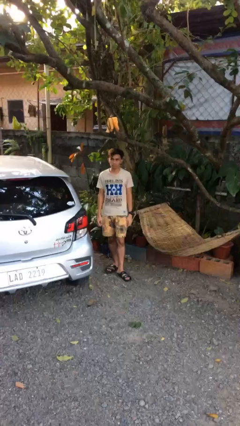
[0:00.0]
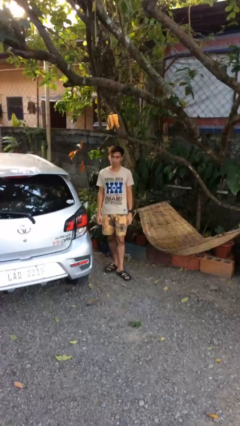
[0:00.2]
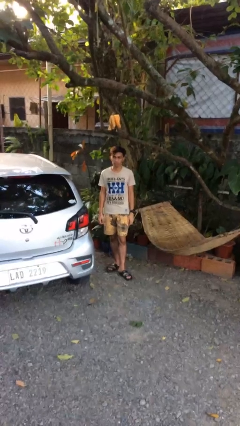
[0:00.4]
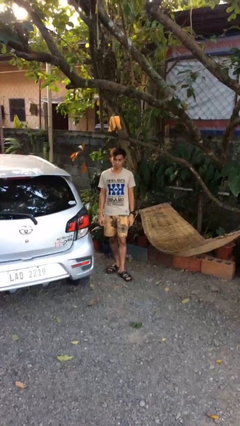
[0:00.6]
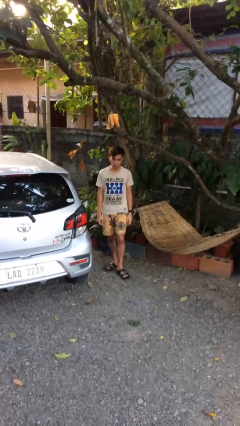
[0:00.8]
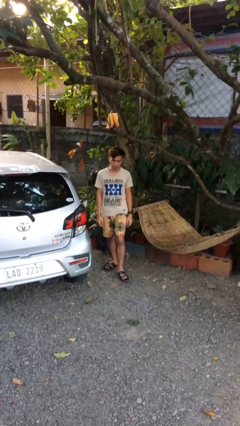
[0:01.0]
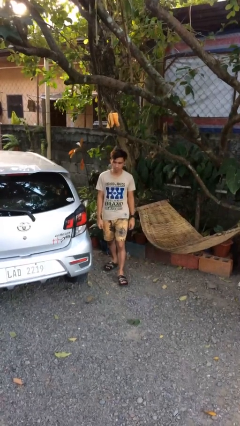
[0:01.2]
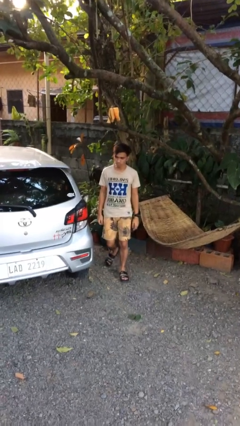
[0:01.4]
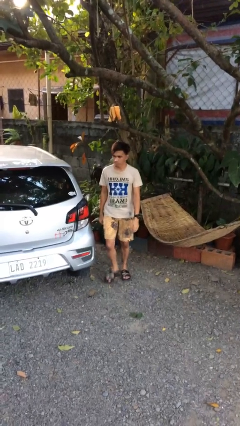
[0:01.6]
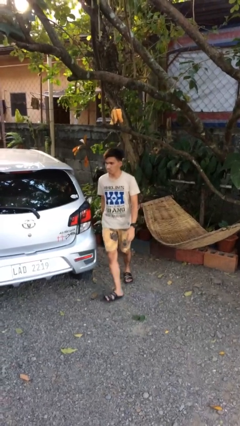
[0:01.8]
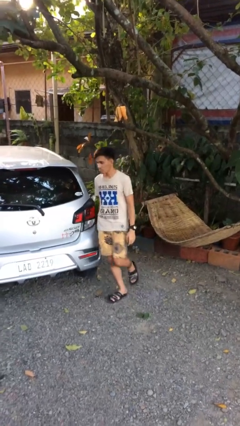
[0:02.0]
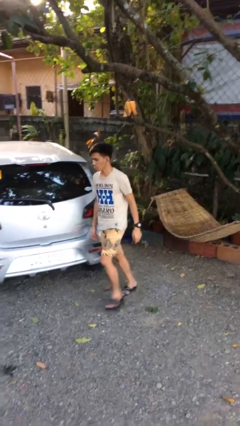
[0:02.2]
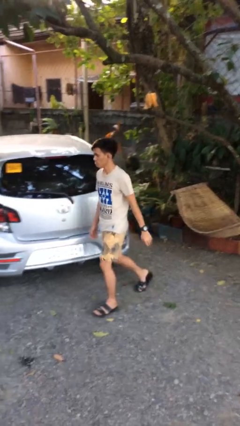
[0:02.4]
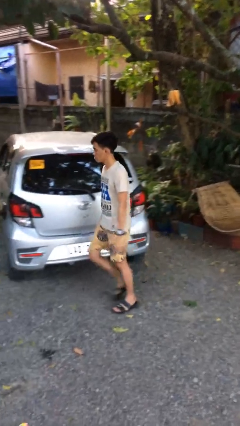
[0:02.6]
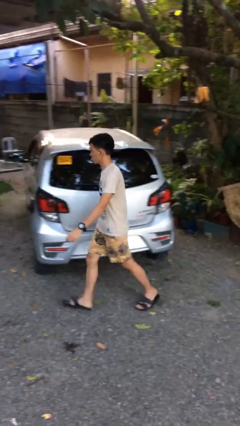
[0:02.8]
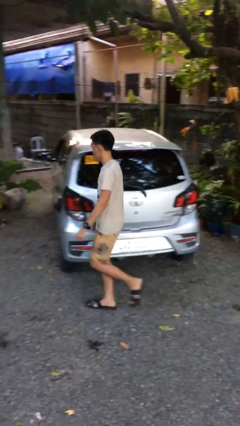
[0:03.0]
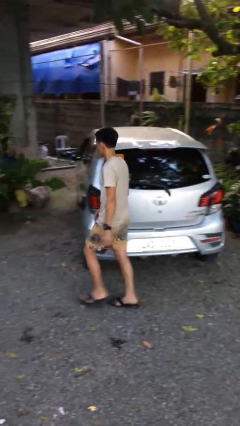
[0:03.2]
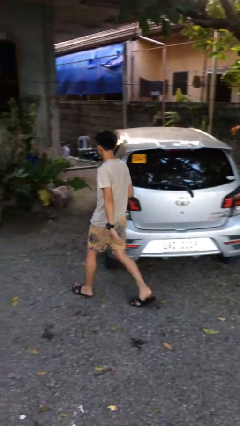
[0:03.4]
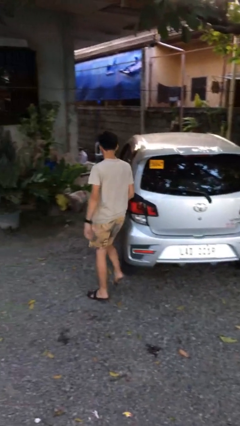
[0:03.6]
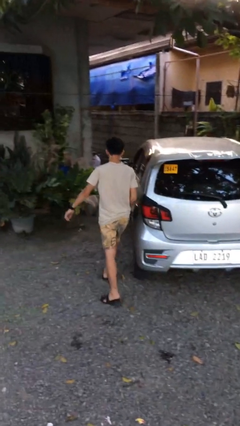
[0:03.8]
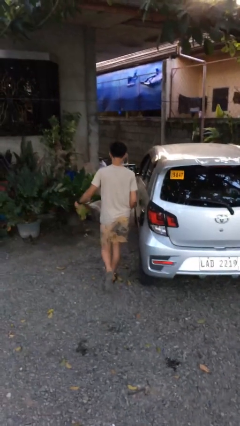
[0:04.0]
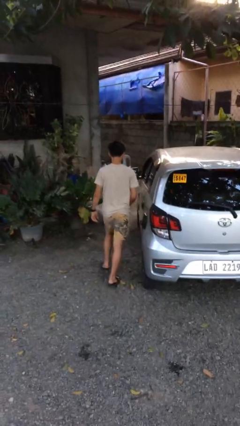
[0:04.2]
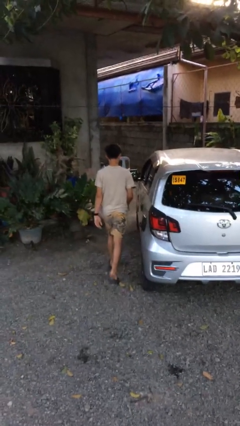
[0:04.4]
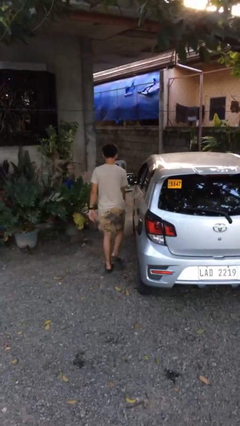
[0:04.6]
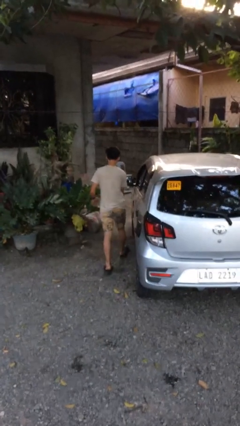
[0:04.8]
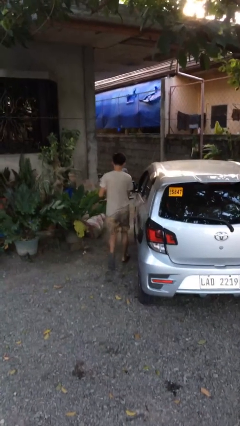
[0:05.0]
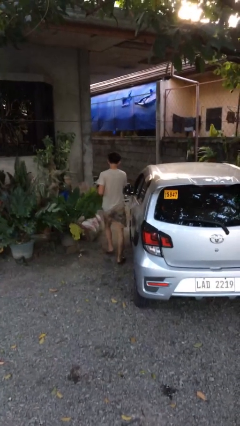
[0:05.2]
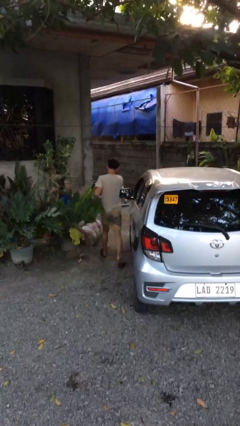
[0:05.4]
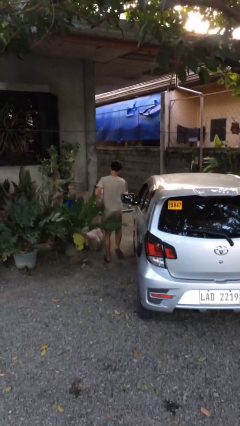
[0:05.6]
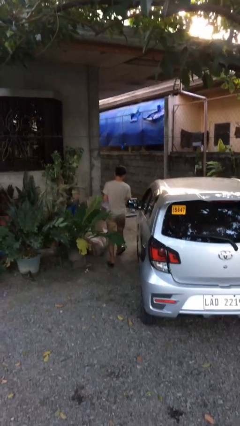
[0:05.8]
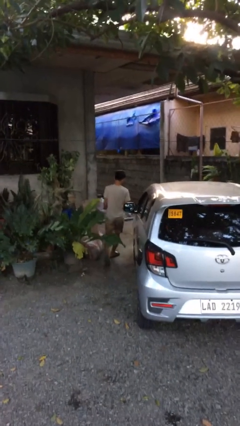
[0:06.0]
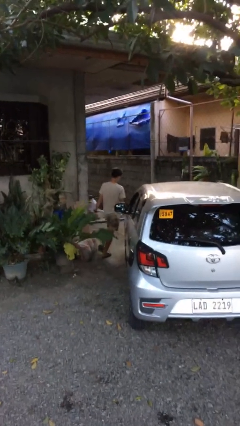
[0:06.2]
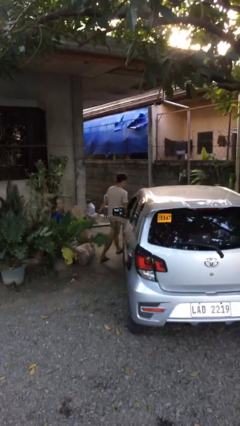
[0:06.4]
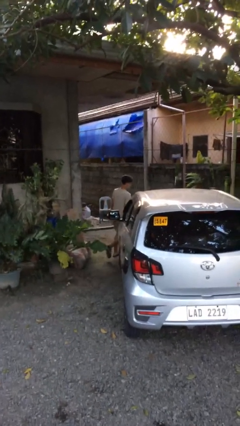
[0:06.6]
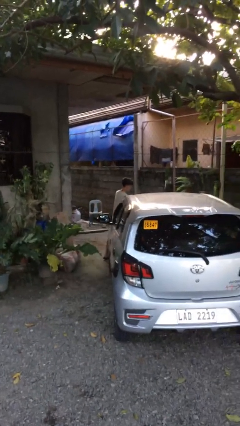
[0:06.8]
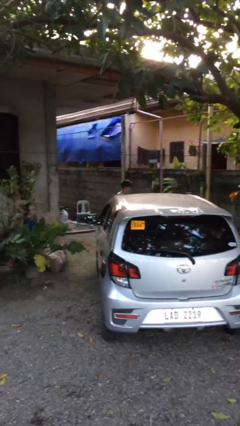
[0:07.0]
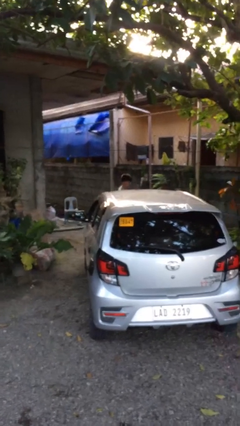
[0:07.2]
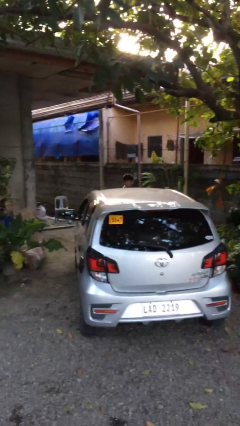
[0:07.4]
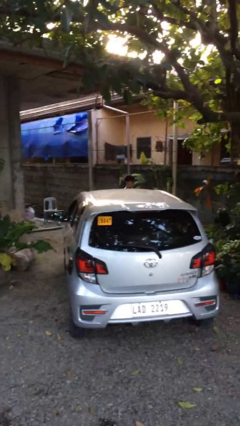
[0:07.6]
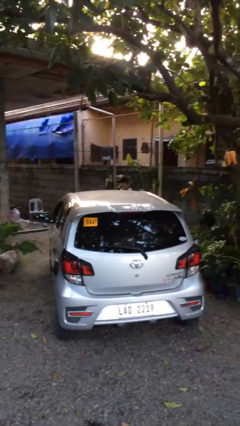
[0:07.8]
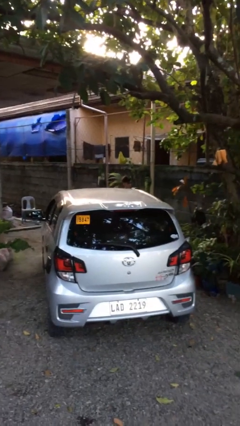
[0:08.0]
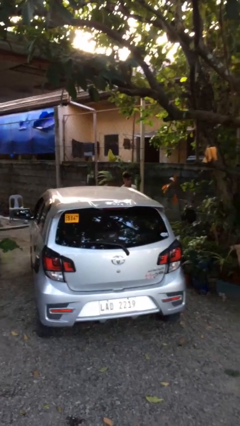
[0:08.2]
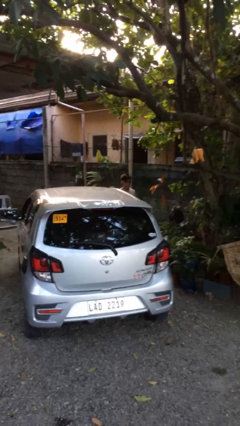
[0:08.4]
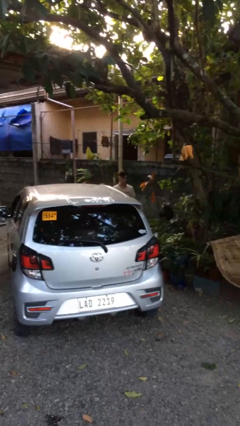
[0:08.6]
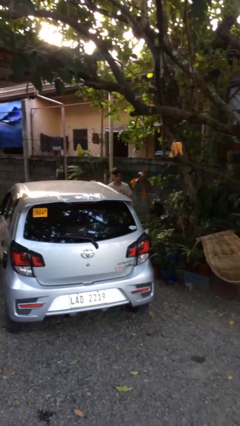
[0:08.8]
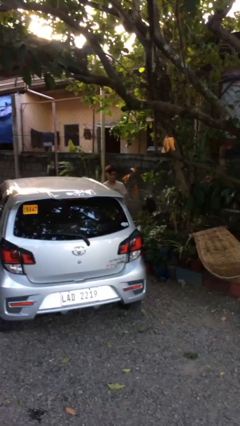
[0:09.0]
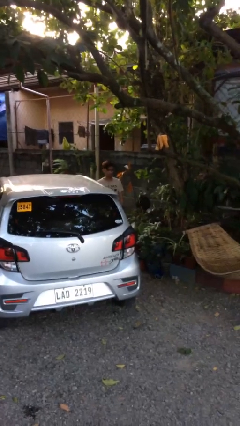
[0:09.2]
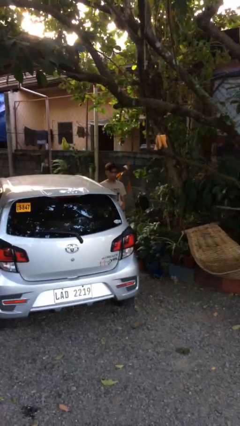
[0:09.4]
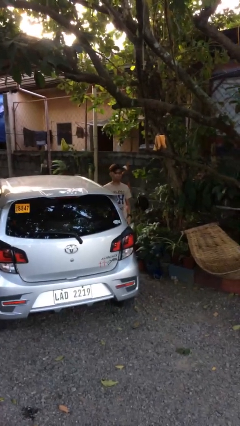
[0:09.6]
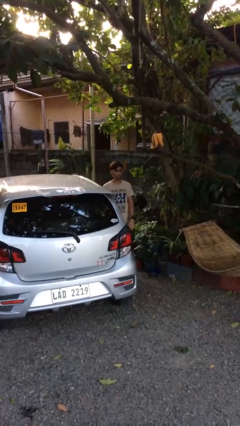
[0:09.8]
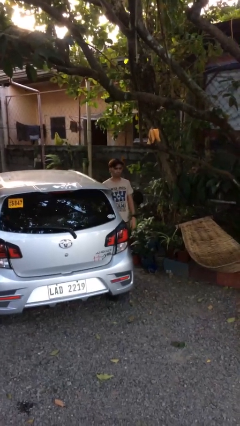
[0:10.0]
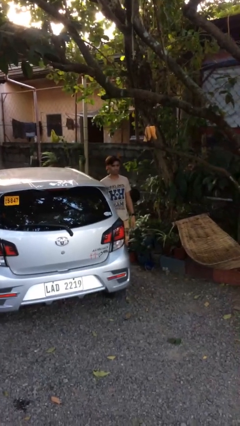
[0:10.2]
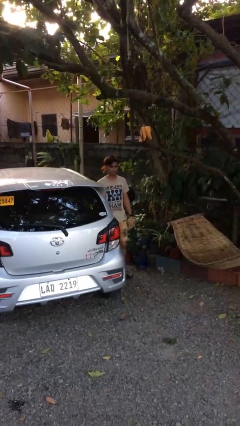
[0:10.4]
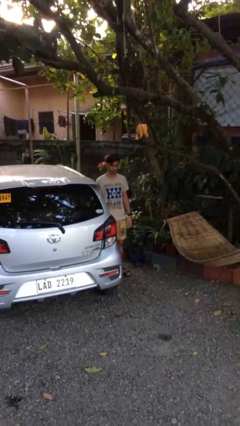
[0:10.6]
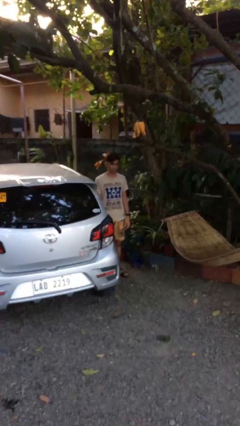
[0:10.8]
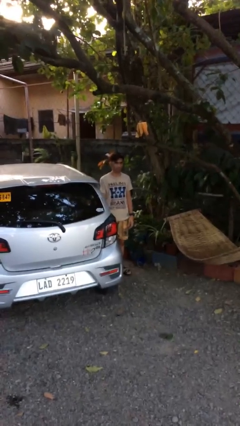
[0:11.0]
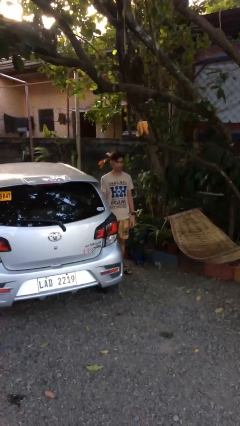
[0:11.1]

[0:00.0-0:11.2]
person walks around car

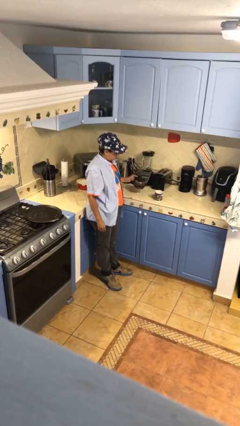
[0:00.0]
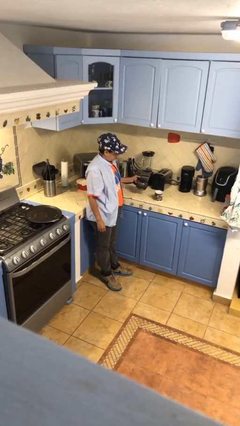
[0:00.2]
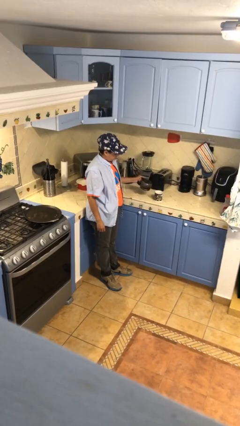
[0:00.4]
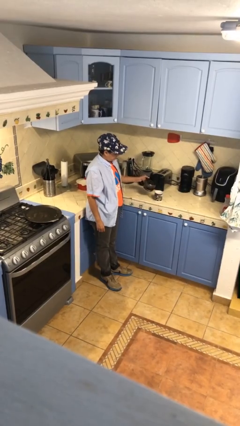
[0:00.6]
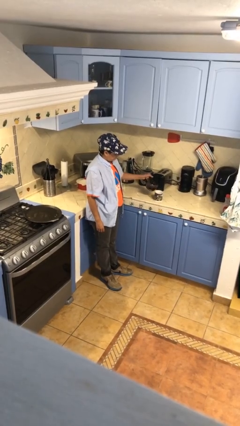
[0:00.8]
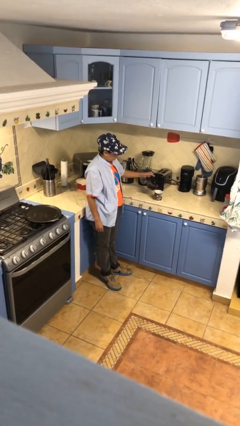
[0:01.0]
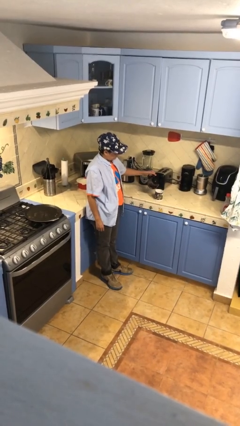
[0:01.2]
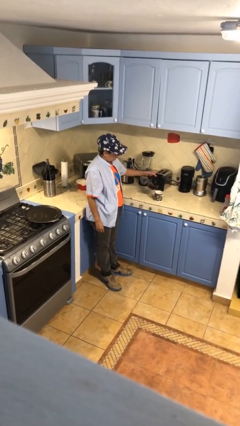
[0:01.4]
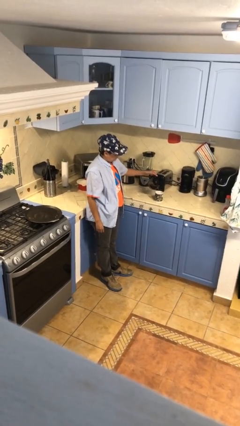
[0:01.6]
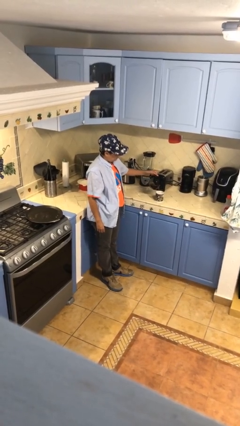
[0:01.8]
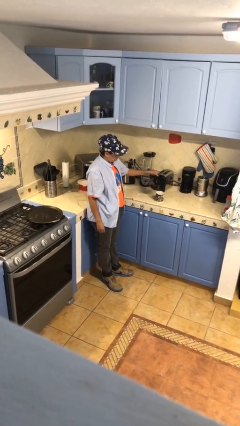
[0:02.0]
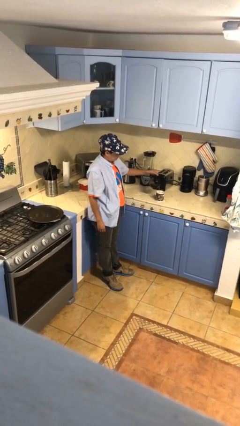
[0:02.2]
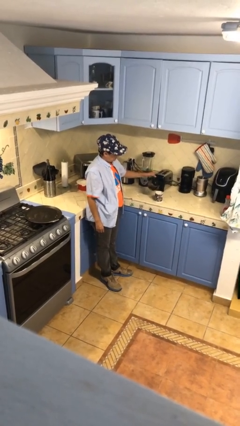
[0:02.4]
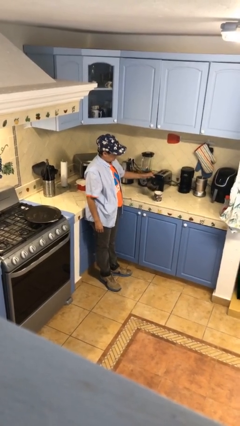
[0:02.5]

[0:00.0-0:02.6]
person pours coffee into mug

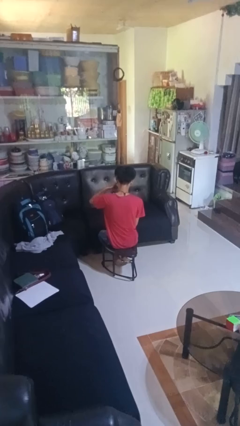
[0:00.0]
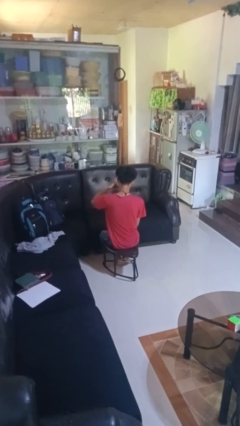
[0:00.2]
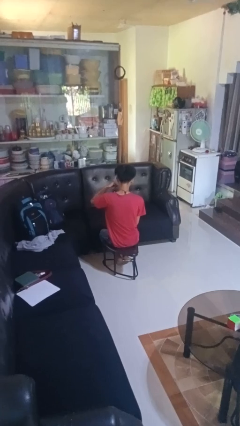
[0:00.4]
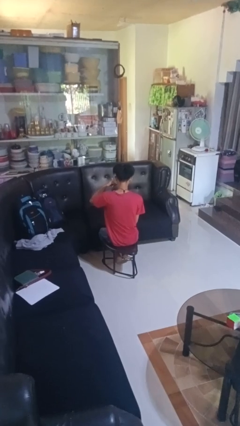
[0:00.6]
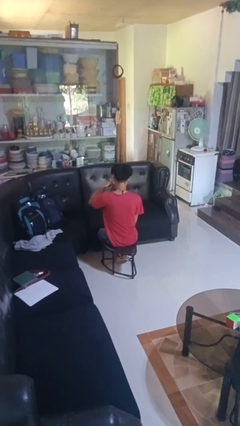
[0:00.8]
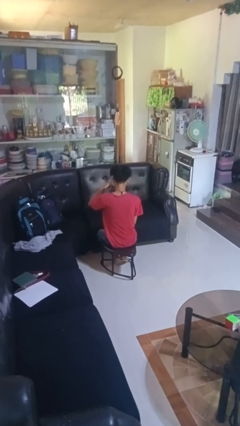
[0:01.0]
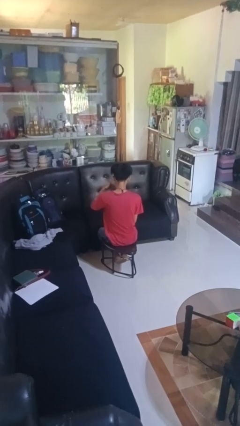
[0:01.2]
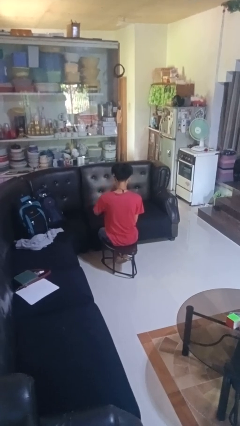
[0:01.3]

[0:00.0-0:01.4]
person gestures call me

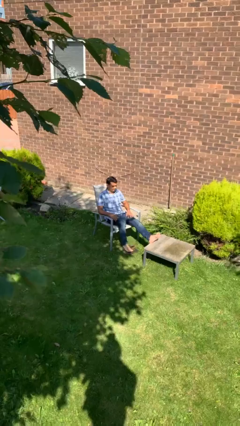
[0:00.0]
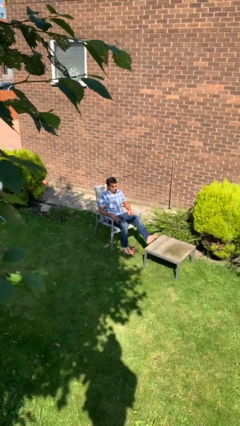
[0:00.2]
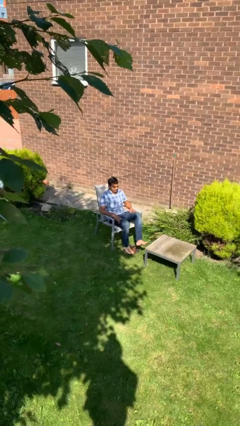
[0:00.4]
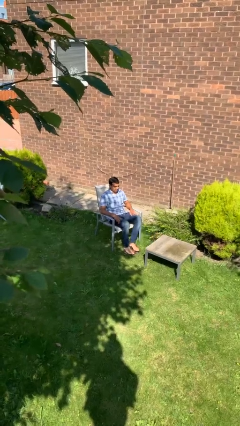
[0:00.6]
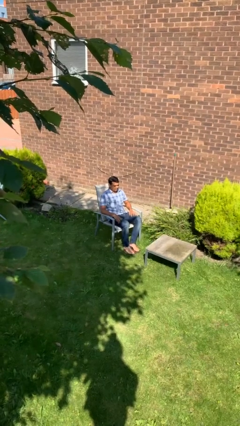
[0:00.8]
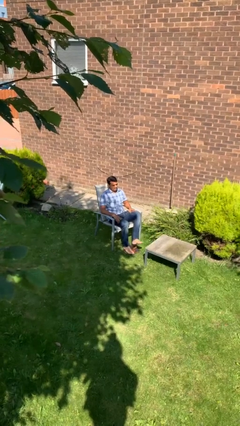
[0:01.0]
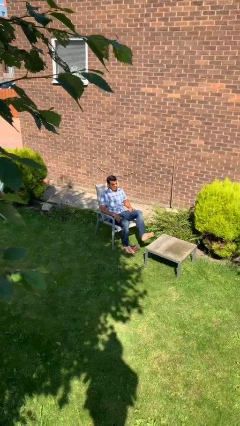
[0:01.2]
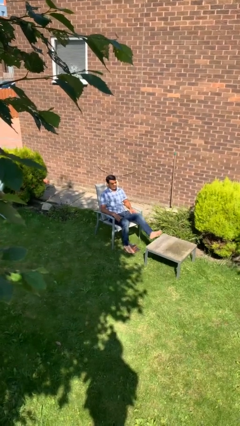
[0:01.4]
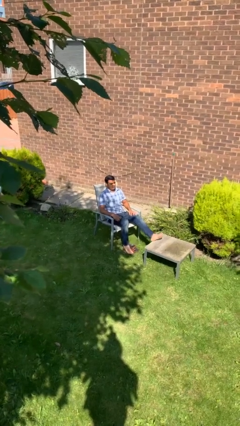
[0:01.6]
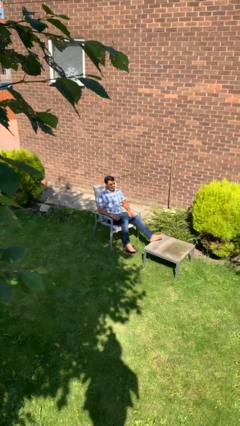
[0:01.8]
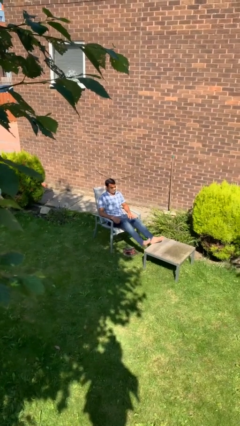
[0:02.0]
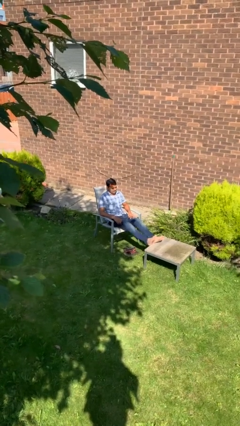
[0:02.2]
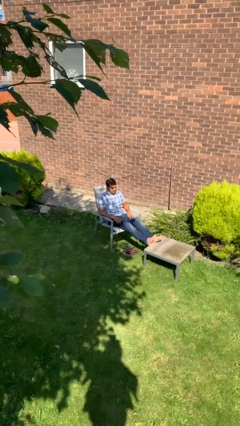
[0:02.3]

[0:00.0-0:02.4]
person puts feet up

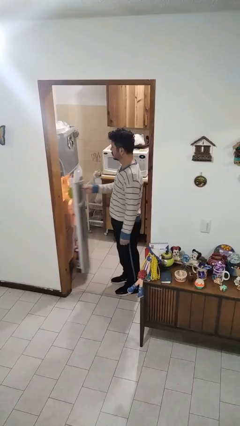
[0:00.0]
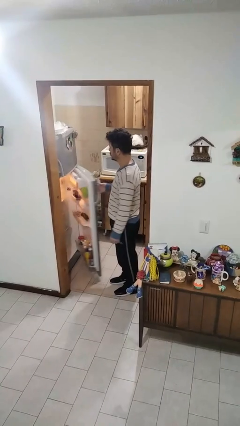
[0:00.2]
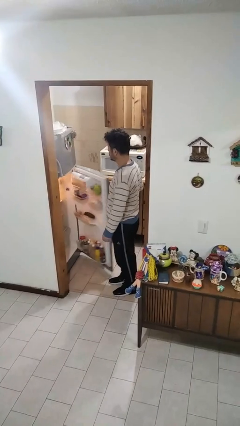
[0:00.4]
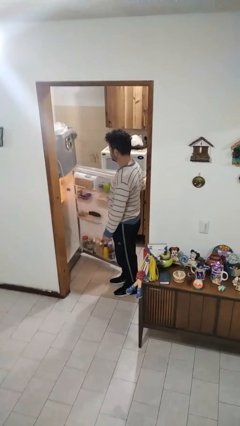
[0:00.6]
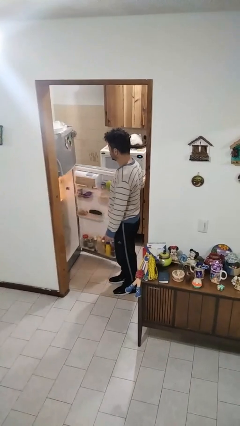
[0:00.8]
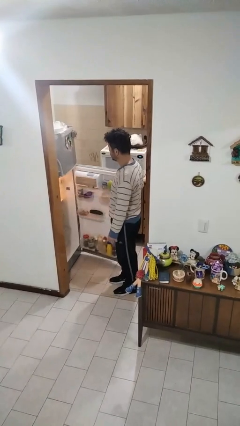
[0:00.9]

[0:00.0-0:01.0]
person opens refrigerator
